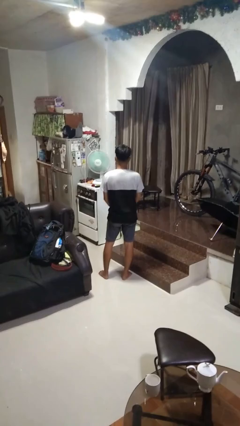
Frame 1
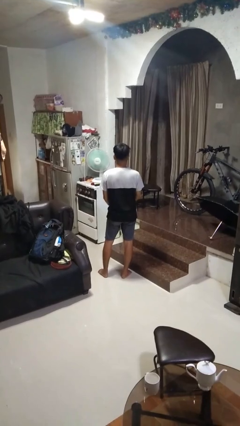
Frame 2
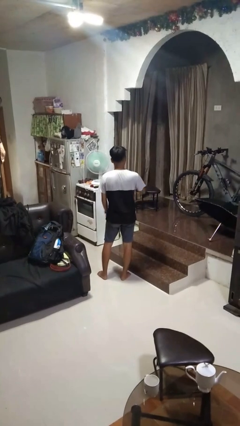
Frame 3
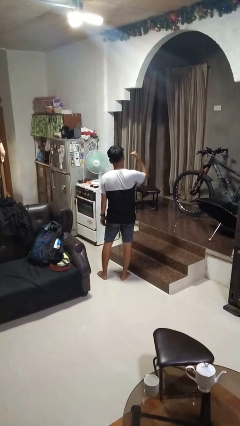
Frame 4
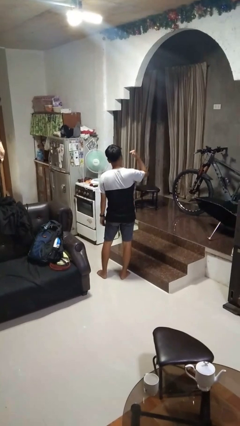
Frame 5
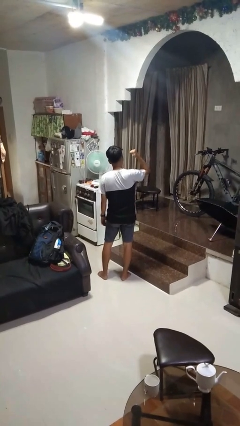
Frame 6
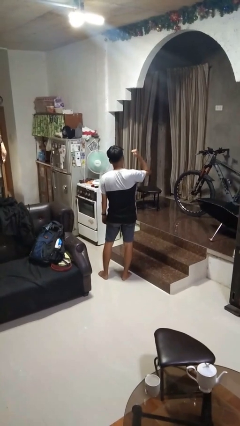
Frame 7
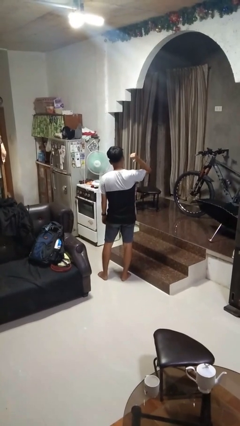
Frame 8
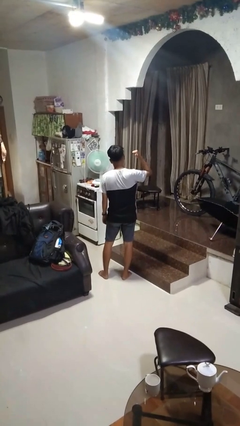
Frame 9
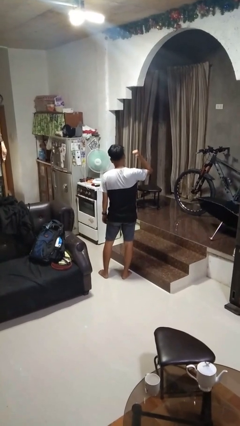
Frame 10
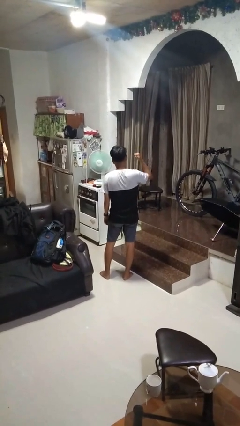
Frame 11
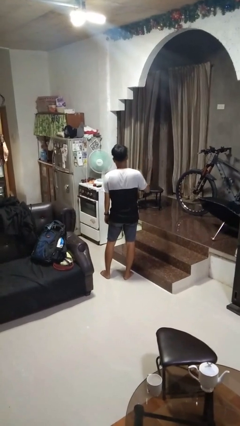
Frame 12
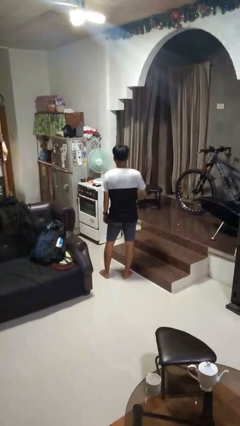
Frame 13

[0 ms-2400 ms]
person gestures behind me

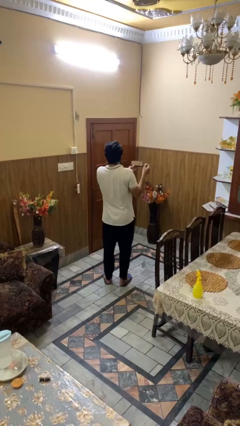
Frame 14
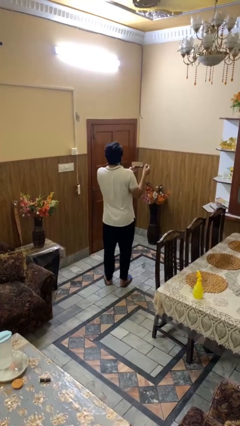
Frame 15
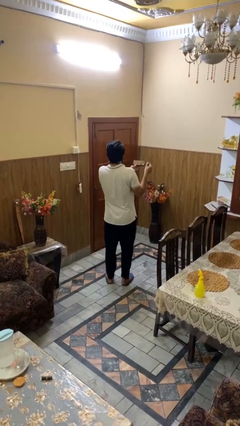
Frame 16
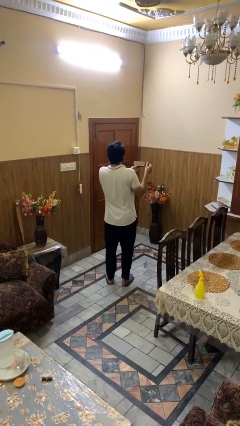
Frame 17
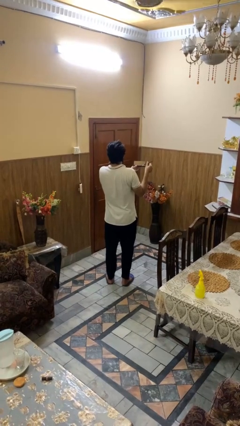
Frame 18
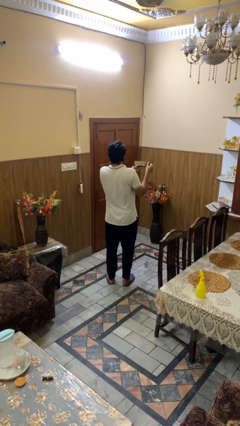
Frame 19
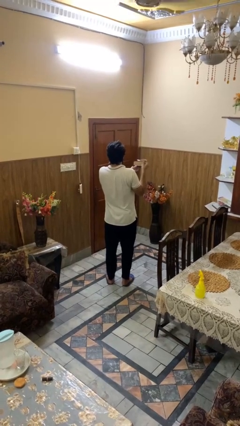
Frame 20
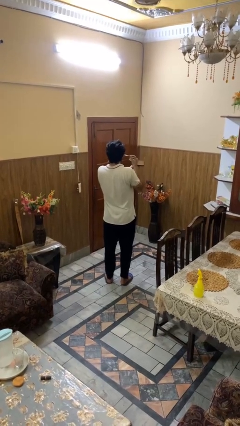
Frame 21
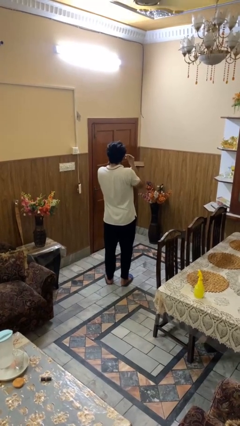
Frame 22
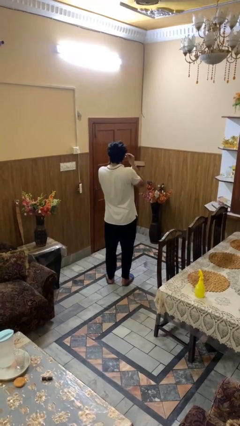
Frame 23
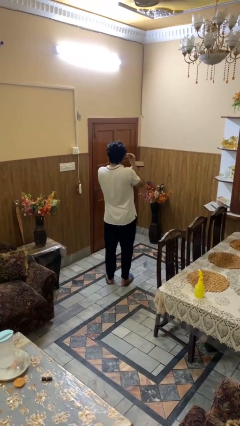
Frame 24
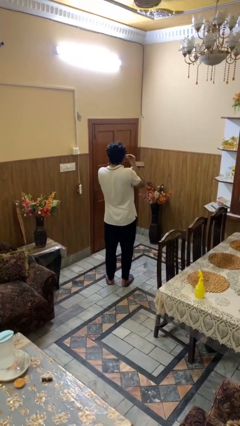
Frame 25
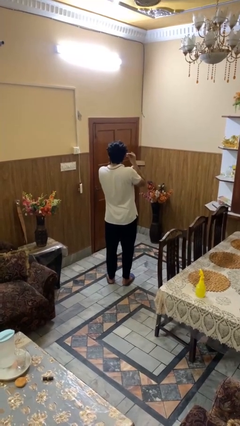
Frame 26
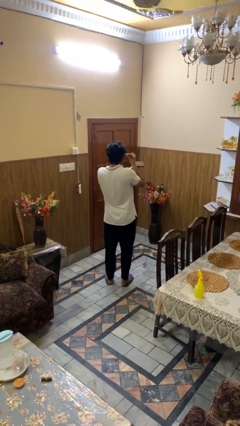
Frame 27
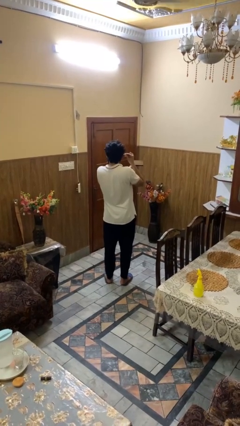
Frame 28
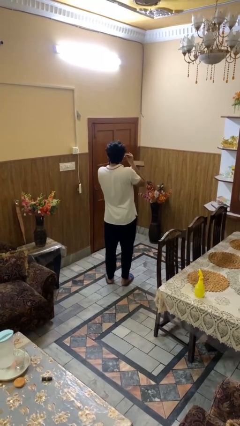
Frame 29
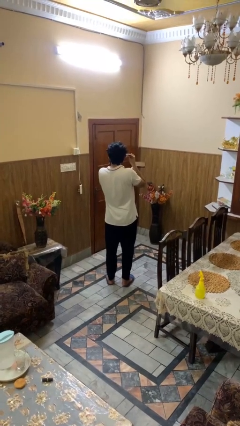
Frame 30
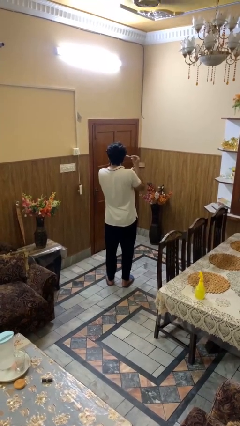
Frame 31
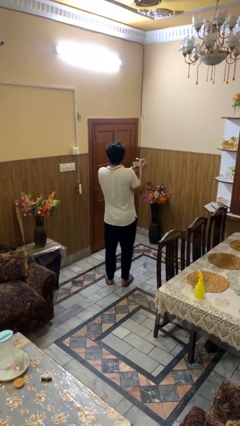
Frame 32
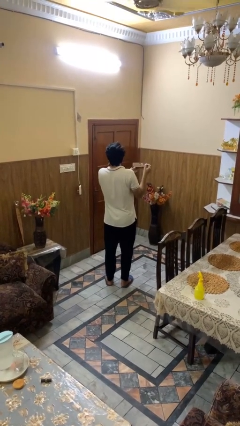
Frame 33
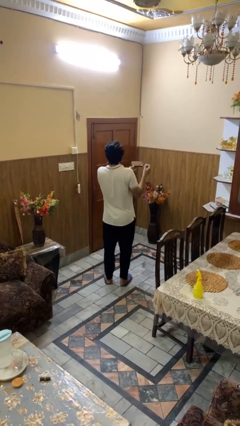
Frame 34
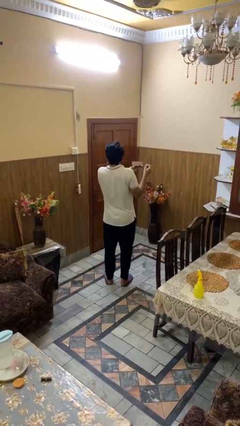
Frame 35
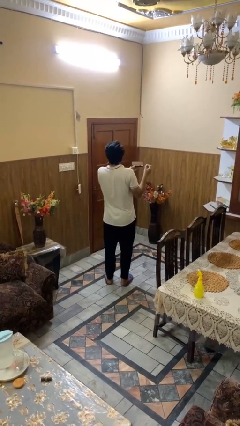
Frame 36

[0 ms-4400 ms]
person applies eye makeup

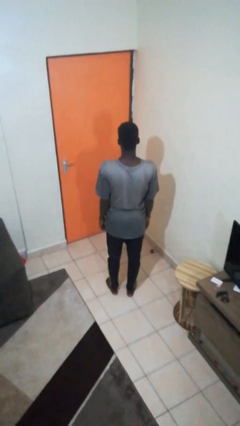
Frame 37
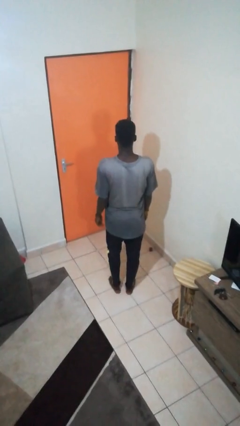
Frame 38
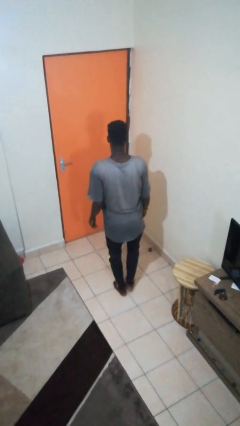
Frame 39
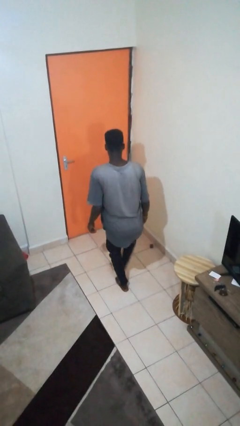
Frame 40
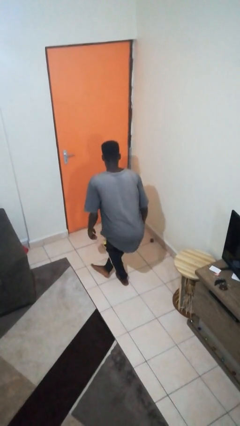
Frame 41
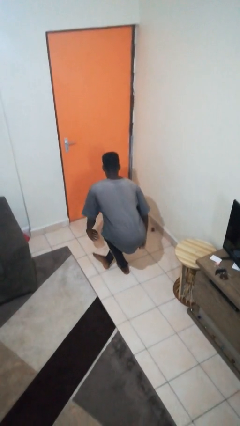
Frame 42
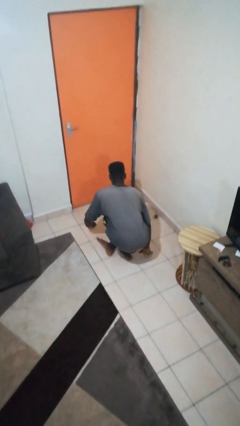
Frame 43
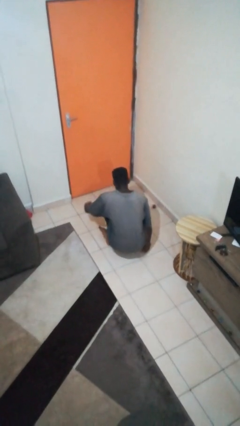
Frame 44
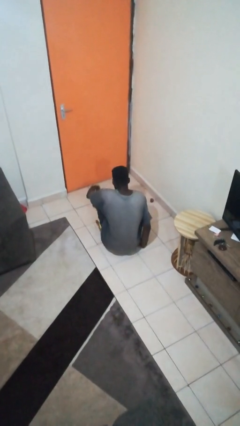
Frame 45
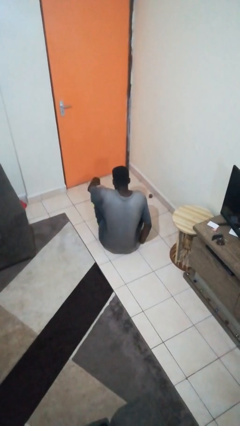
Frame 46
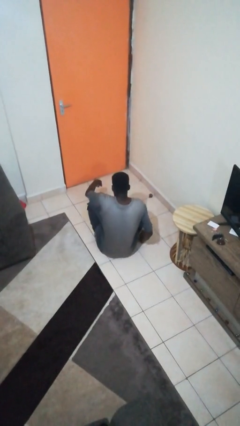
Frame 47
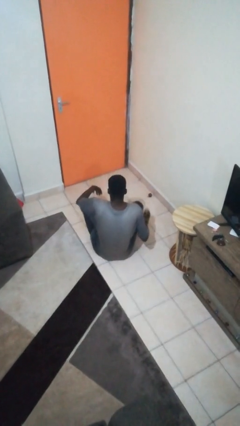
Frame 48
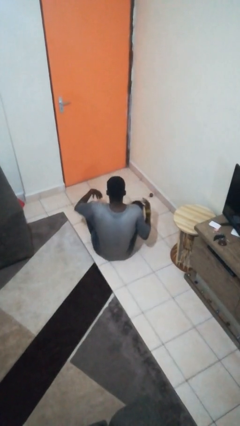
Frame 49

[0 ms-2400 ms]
person sits crisscross

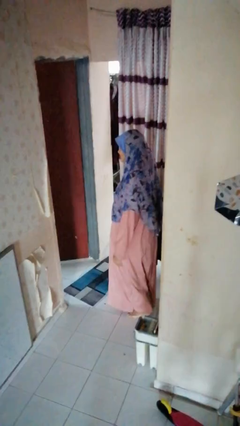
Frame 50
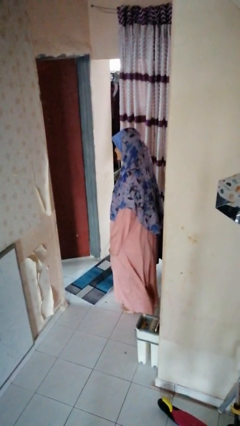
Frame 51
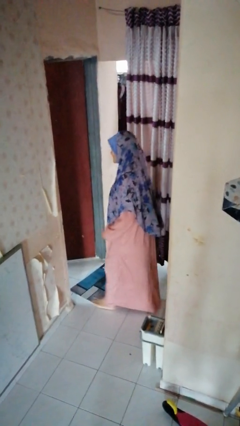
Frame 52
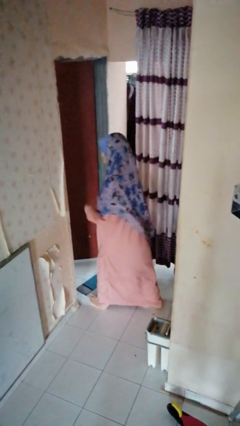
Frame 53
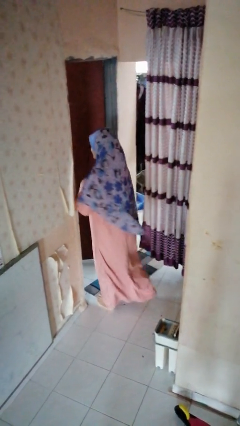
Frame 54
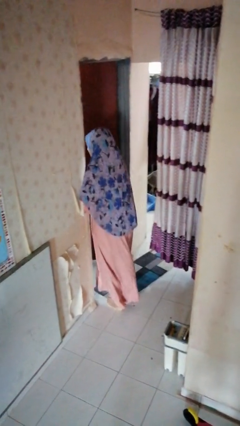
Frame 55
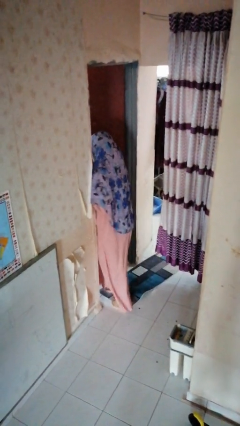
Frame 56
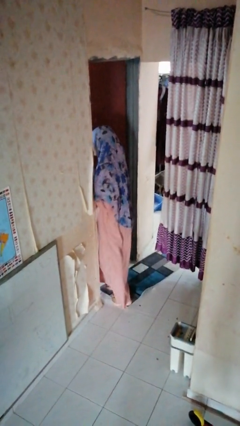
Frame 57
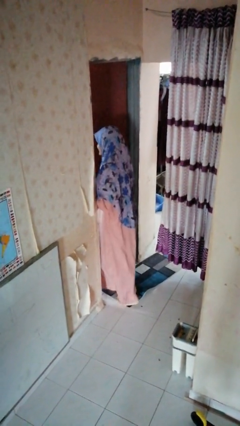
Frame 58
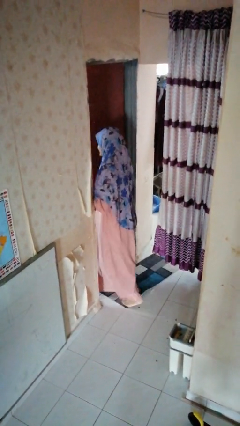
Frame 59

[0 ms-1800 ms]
person bumps into wall

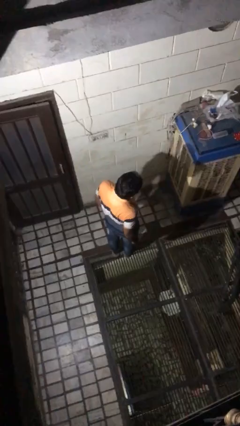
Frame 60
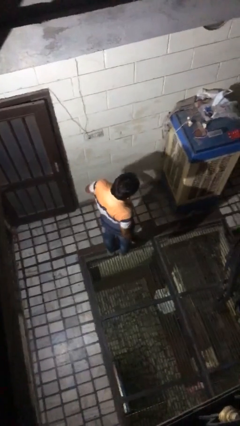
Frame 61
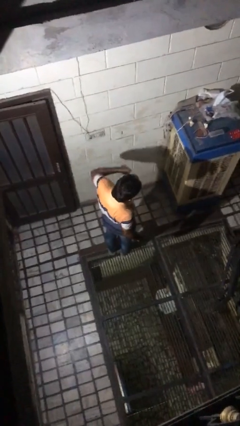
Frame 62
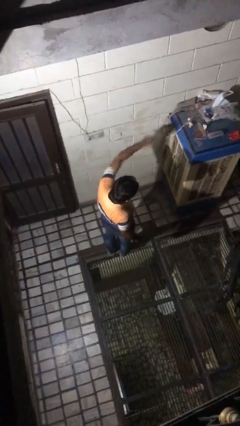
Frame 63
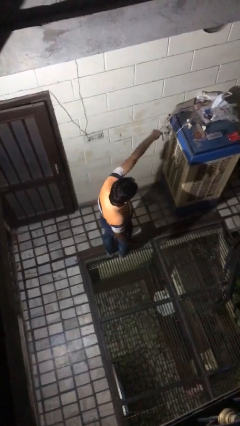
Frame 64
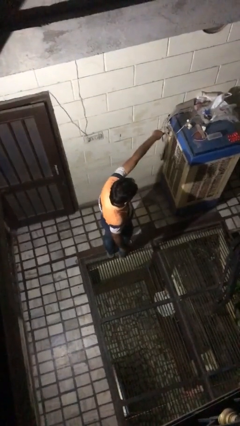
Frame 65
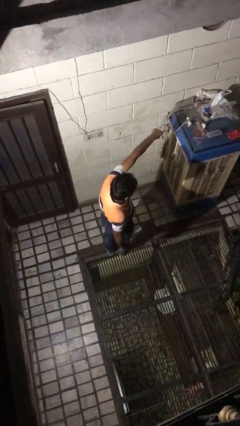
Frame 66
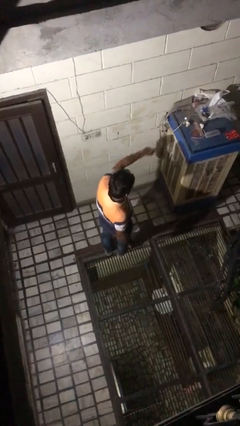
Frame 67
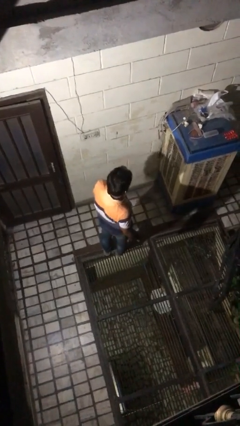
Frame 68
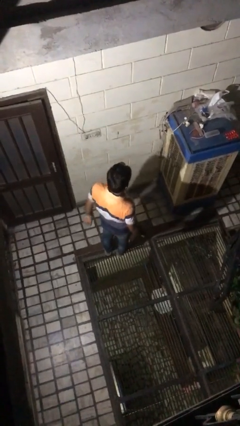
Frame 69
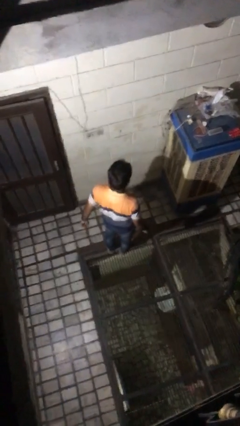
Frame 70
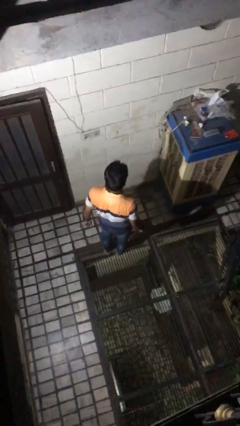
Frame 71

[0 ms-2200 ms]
person punches

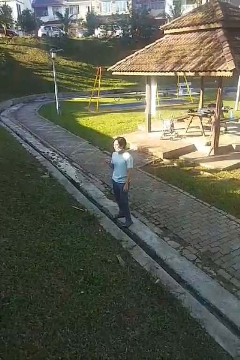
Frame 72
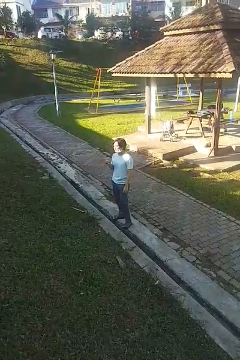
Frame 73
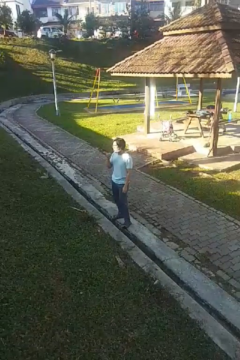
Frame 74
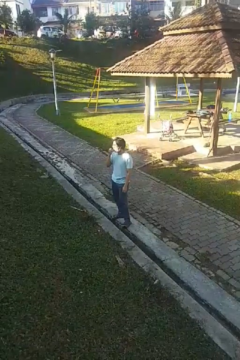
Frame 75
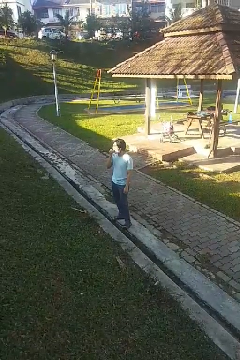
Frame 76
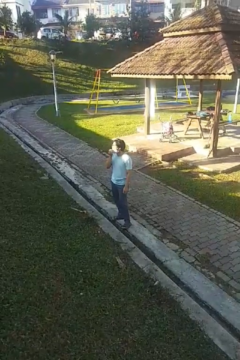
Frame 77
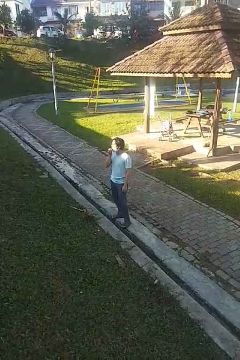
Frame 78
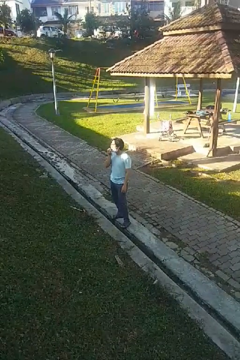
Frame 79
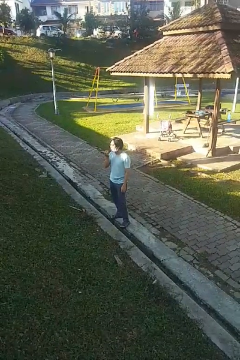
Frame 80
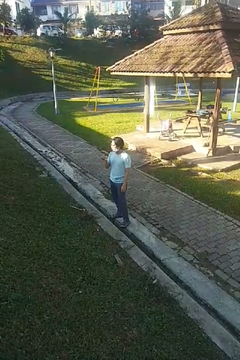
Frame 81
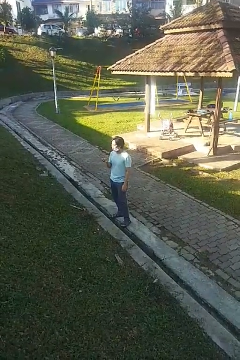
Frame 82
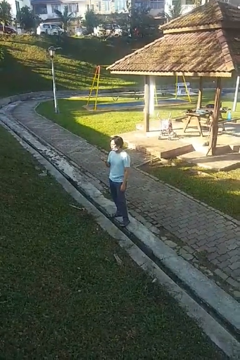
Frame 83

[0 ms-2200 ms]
person flosses

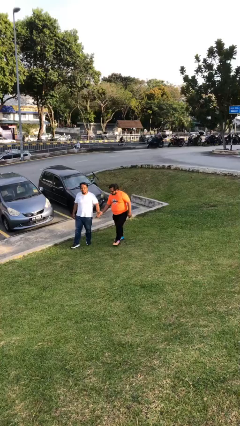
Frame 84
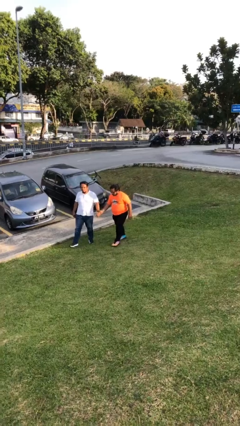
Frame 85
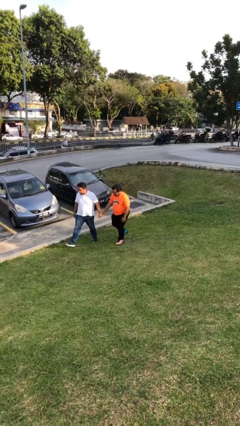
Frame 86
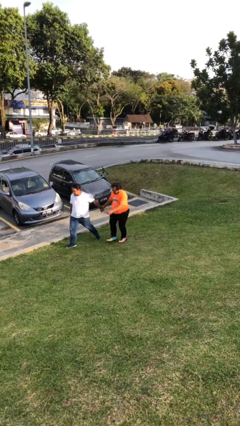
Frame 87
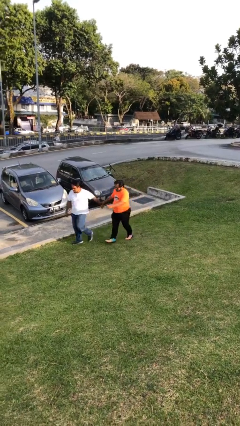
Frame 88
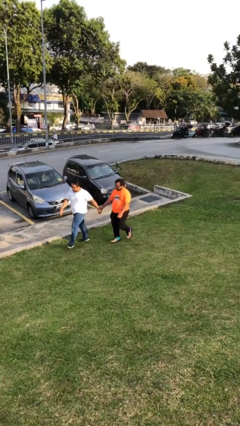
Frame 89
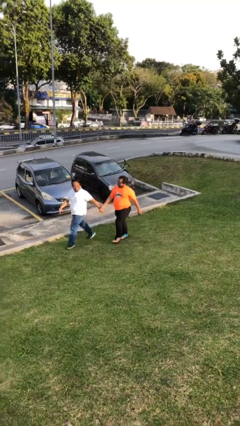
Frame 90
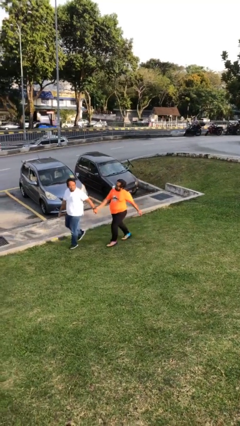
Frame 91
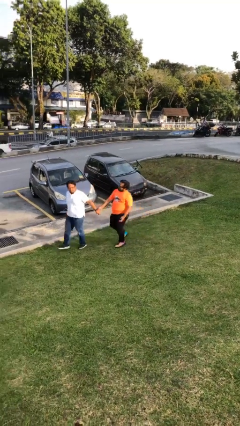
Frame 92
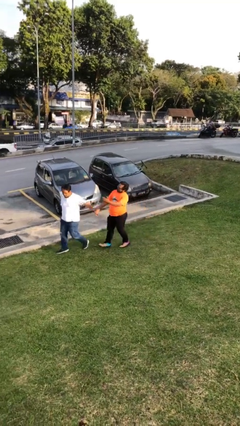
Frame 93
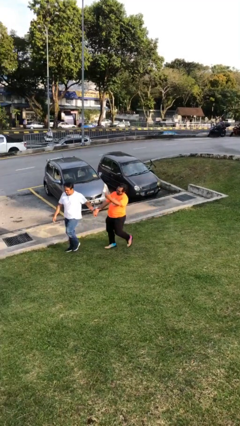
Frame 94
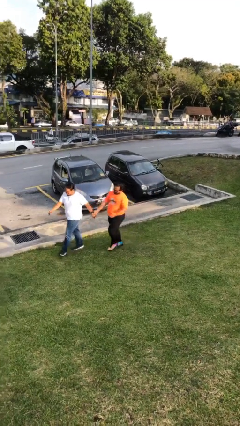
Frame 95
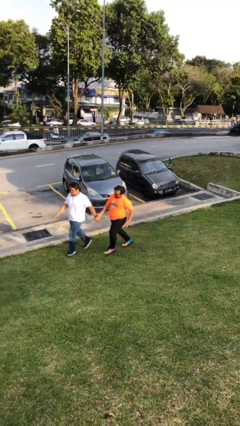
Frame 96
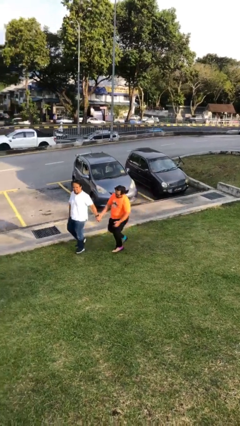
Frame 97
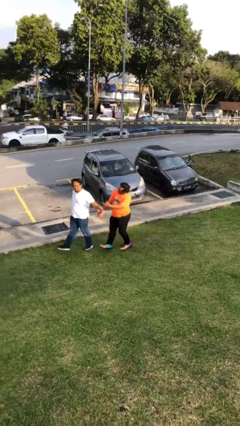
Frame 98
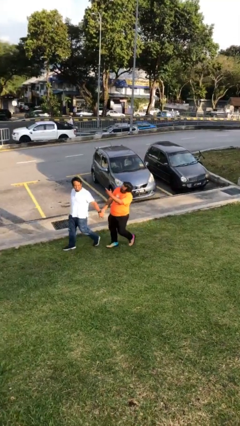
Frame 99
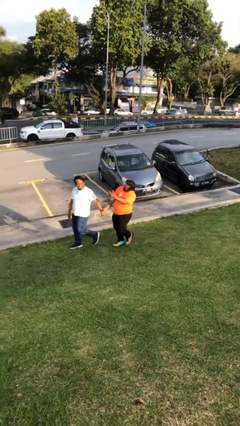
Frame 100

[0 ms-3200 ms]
person holds hand
